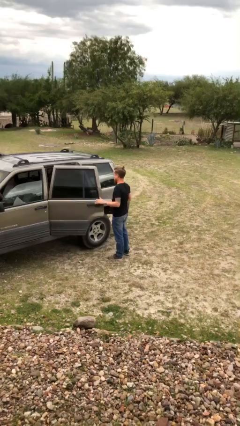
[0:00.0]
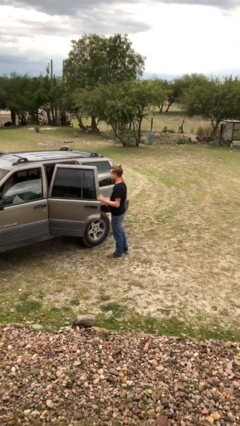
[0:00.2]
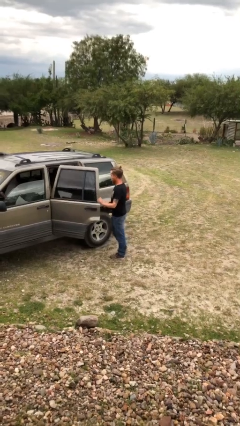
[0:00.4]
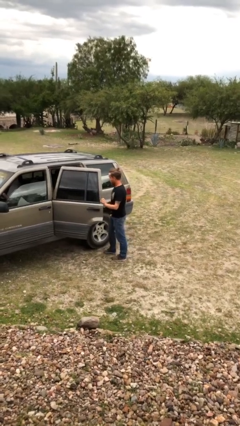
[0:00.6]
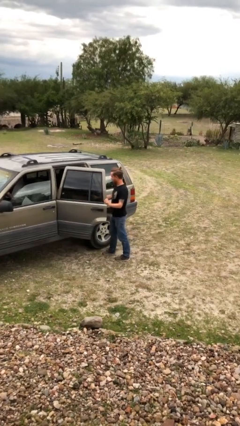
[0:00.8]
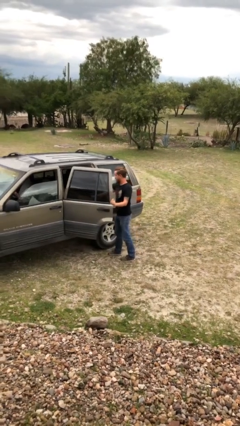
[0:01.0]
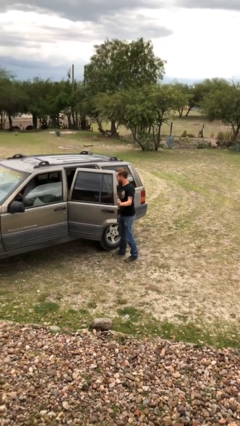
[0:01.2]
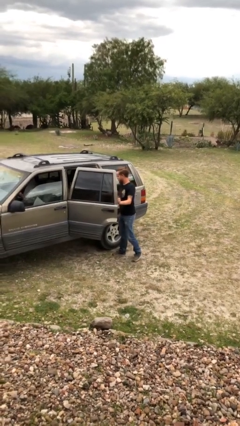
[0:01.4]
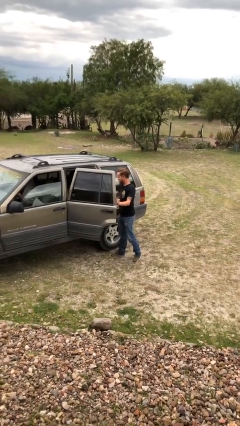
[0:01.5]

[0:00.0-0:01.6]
person unloads car

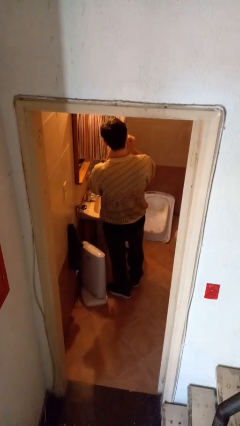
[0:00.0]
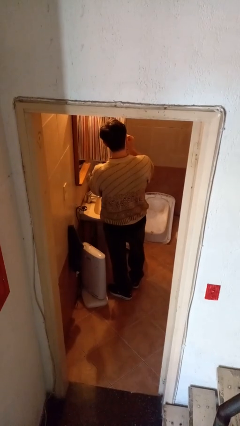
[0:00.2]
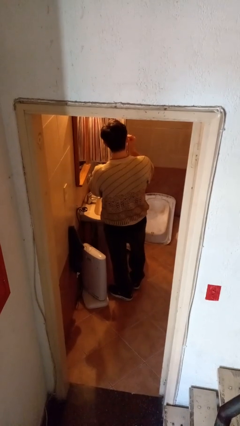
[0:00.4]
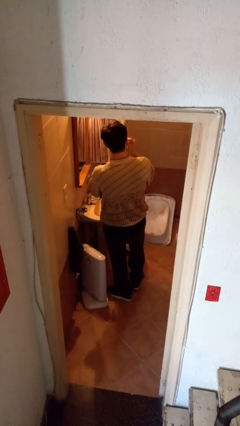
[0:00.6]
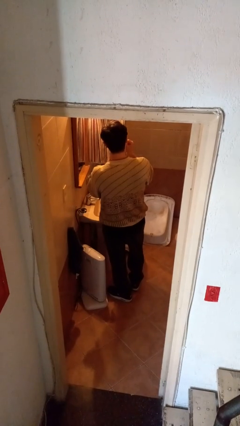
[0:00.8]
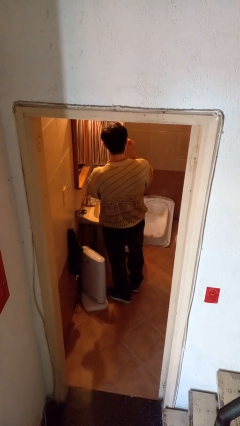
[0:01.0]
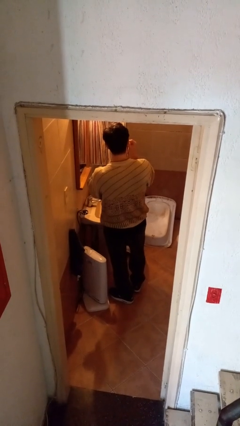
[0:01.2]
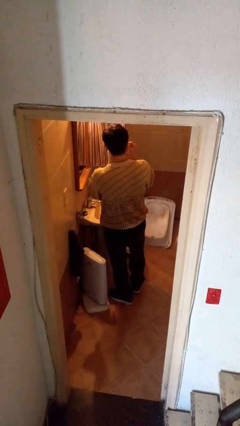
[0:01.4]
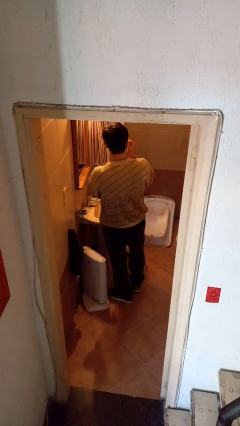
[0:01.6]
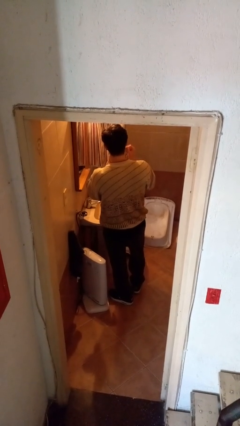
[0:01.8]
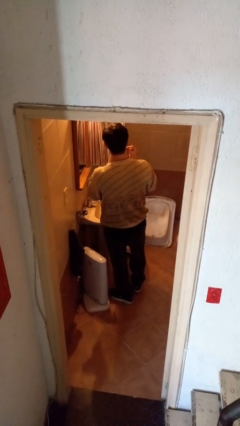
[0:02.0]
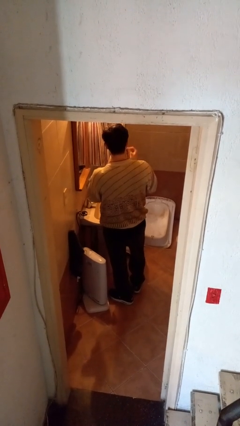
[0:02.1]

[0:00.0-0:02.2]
person flosses

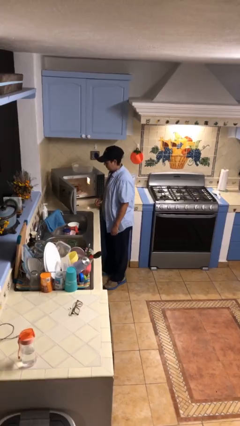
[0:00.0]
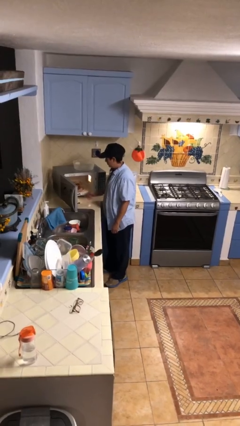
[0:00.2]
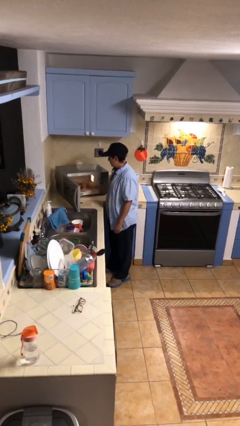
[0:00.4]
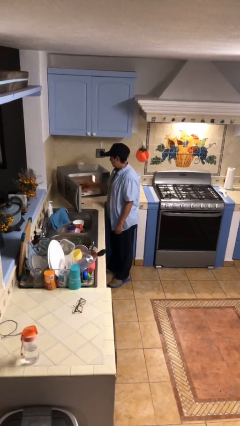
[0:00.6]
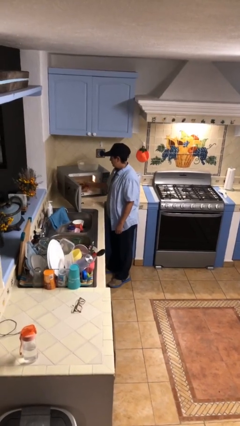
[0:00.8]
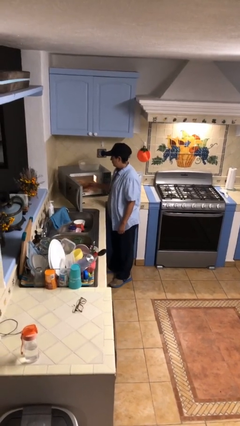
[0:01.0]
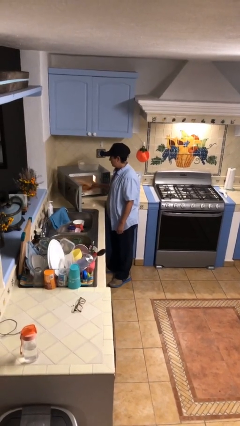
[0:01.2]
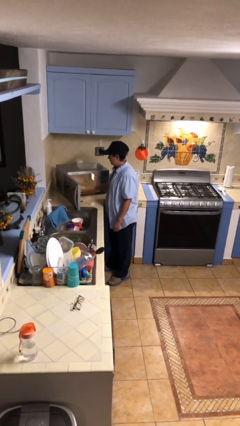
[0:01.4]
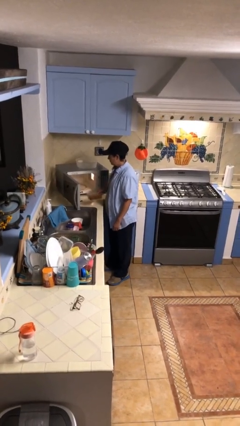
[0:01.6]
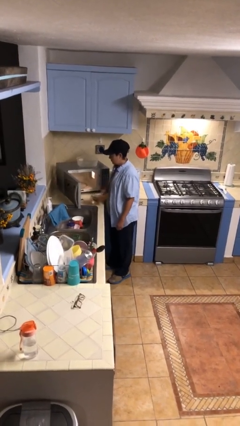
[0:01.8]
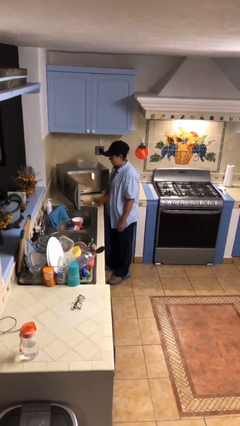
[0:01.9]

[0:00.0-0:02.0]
person takes object from microwave

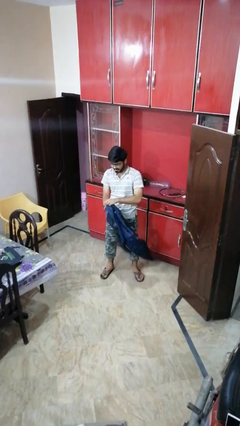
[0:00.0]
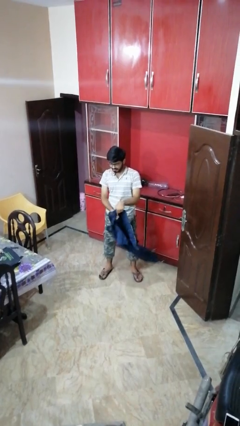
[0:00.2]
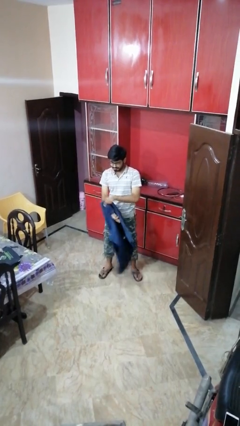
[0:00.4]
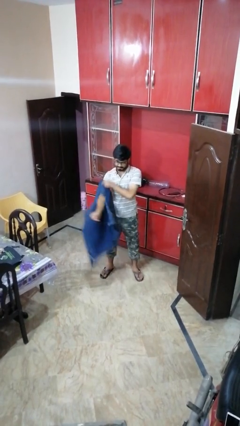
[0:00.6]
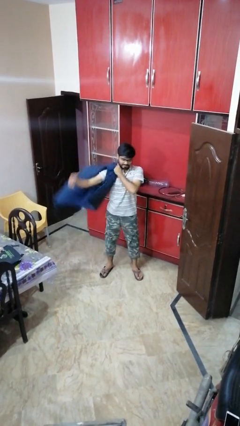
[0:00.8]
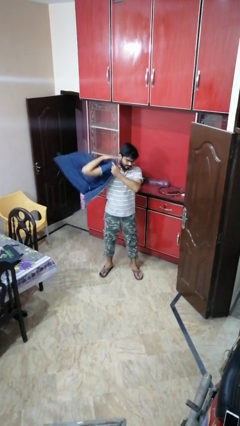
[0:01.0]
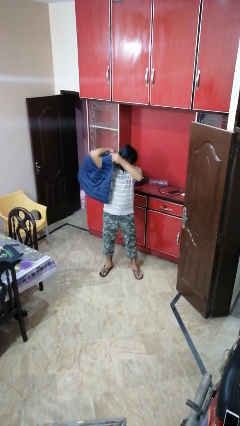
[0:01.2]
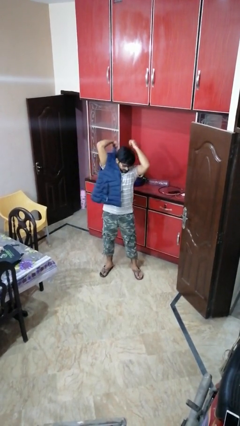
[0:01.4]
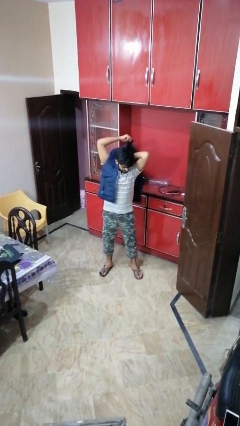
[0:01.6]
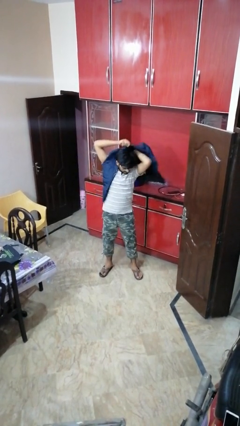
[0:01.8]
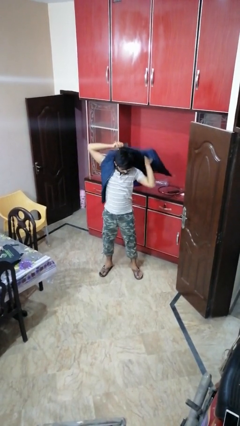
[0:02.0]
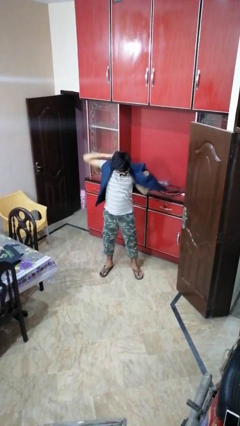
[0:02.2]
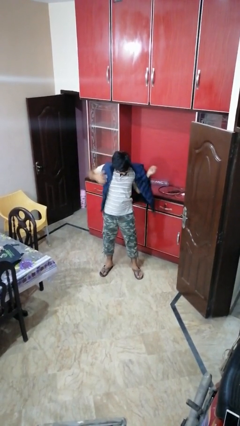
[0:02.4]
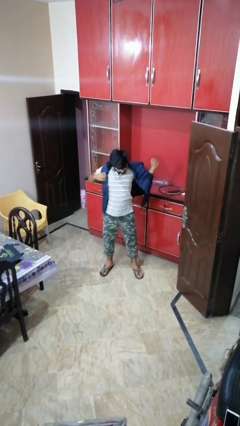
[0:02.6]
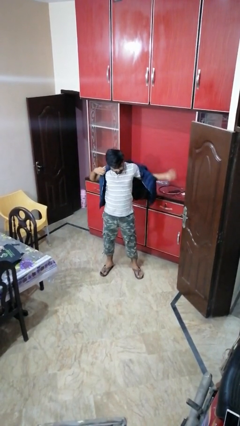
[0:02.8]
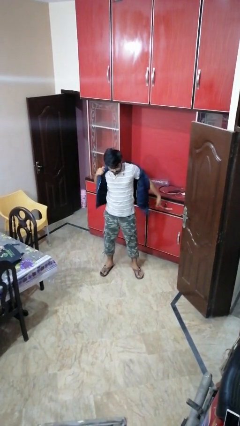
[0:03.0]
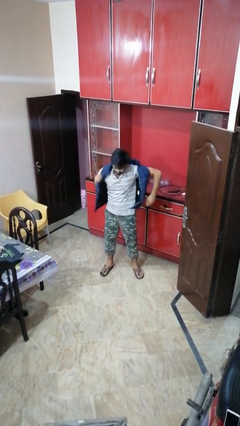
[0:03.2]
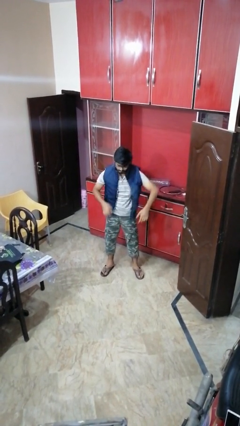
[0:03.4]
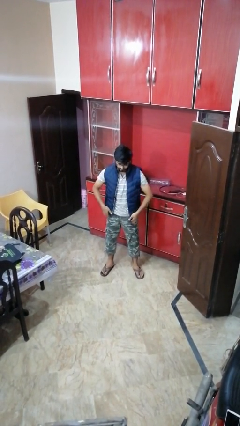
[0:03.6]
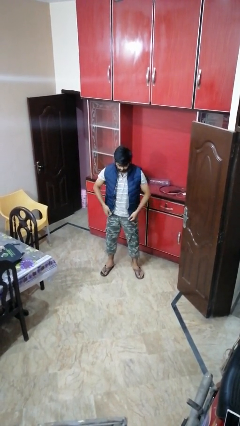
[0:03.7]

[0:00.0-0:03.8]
person puts on jacket

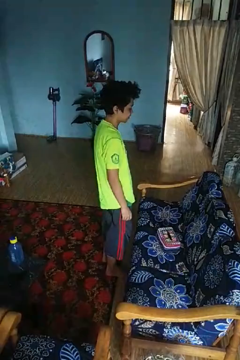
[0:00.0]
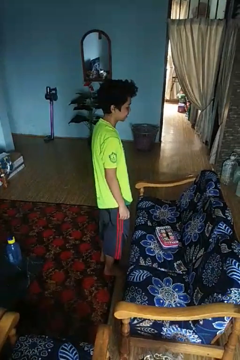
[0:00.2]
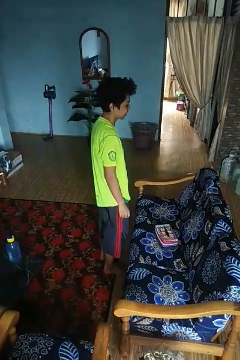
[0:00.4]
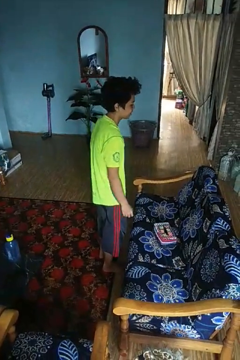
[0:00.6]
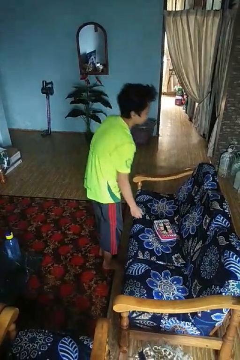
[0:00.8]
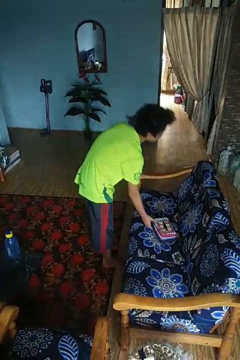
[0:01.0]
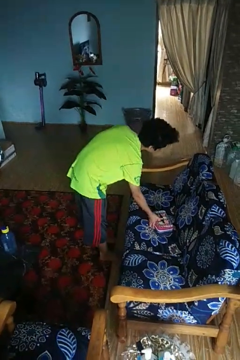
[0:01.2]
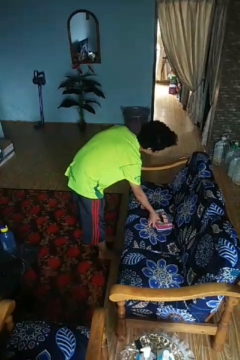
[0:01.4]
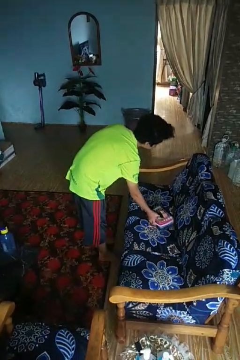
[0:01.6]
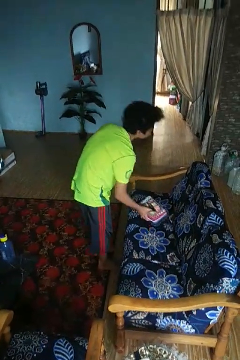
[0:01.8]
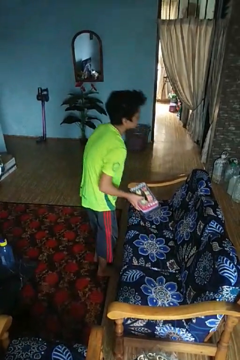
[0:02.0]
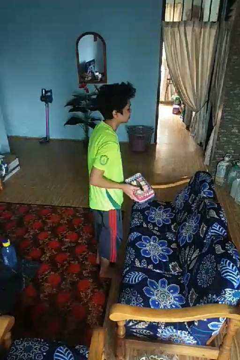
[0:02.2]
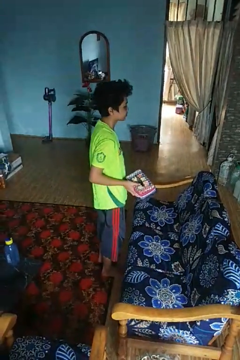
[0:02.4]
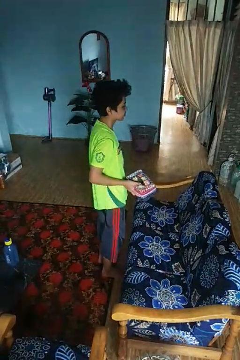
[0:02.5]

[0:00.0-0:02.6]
person picks up object from couch

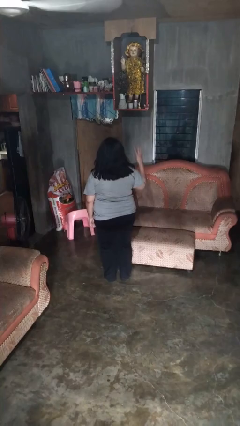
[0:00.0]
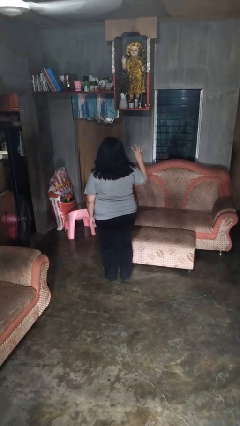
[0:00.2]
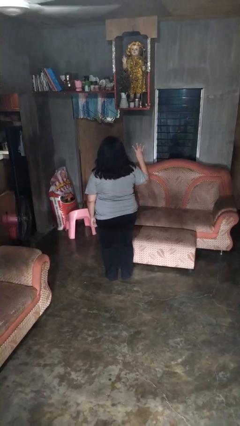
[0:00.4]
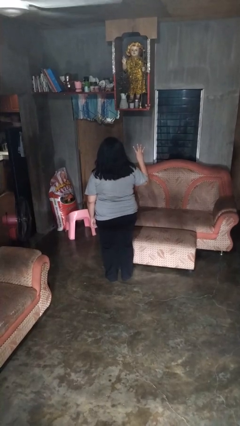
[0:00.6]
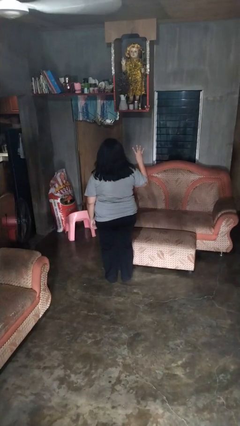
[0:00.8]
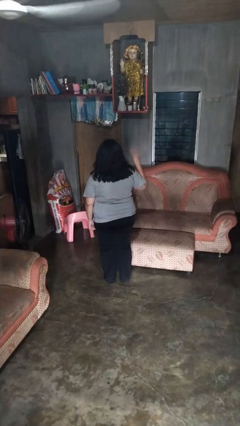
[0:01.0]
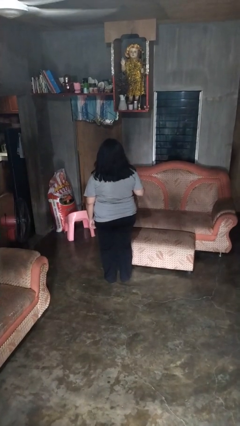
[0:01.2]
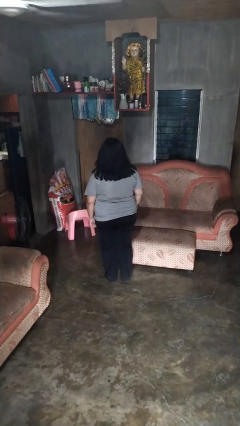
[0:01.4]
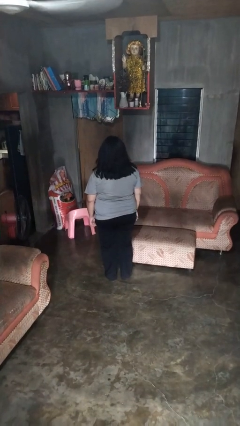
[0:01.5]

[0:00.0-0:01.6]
person gestures number four

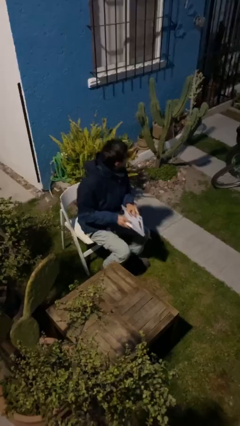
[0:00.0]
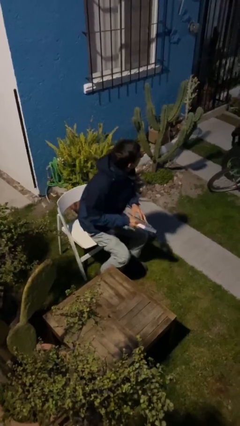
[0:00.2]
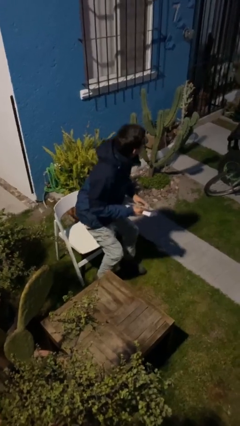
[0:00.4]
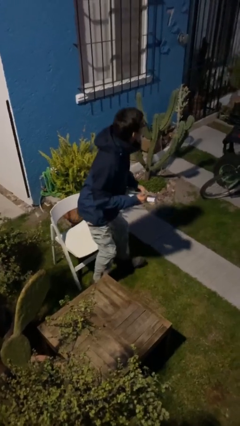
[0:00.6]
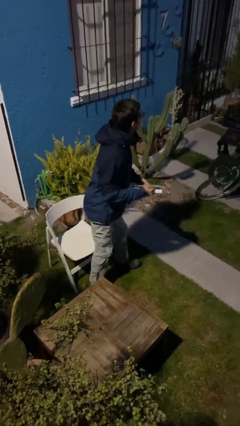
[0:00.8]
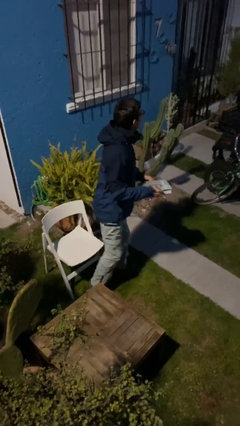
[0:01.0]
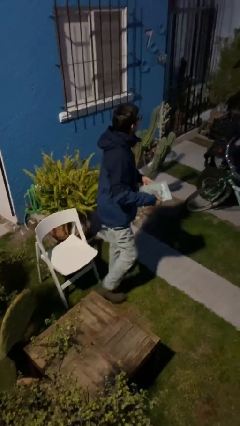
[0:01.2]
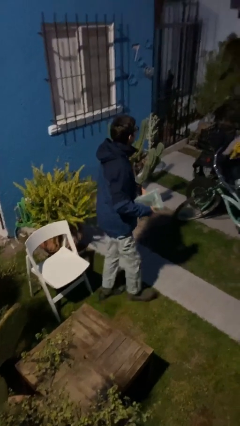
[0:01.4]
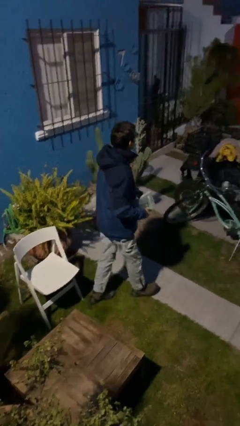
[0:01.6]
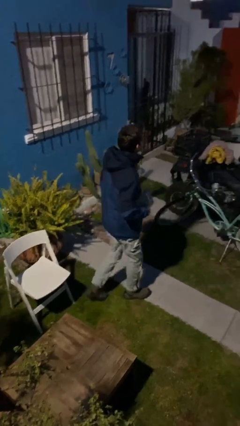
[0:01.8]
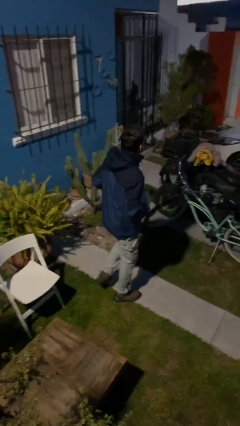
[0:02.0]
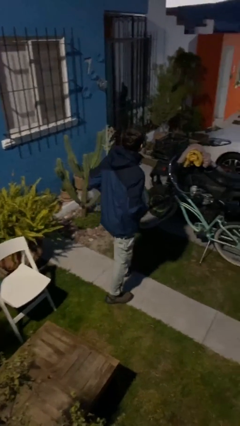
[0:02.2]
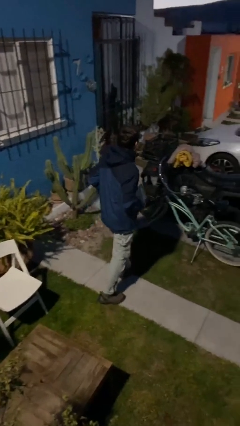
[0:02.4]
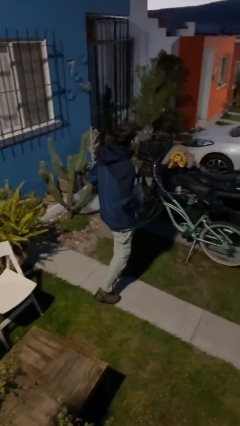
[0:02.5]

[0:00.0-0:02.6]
person stands up

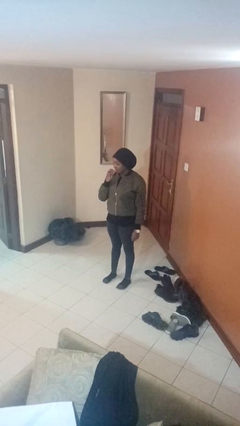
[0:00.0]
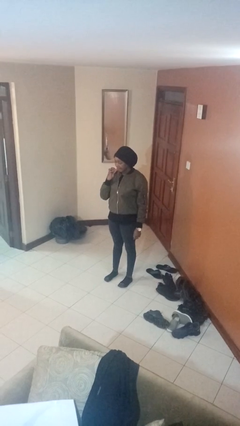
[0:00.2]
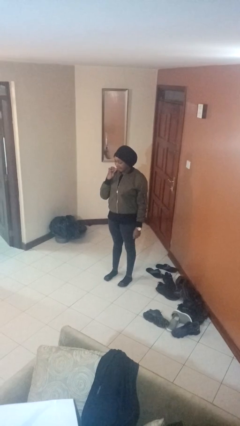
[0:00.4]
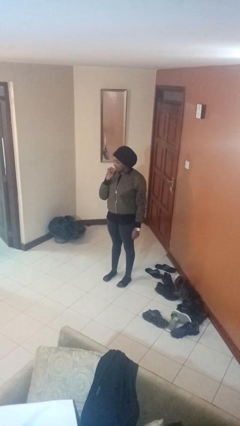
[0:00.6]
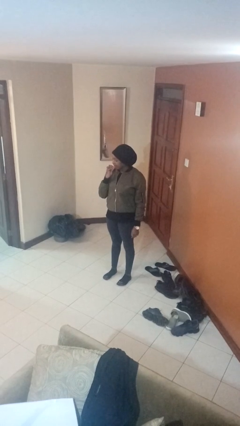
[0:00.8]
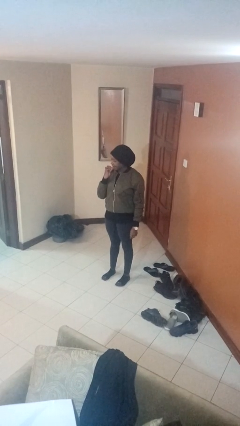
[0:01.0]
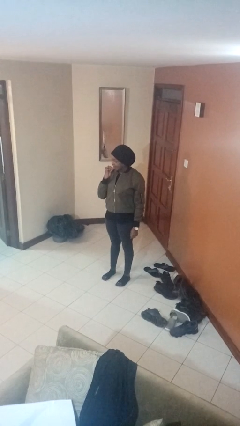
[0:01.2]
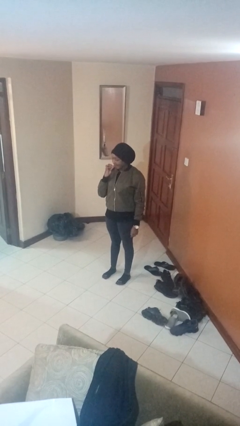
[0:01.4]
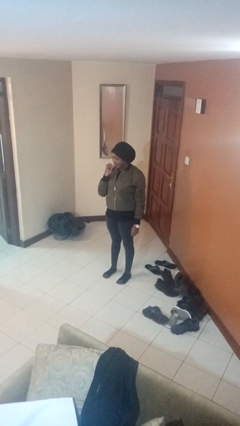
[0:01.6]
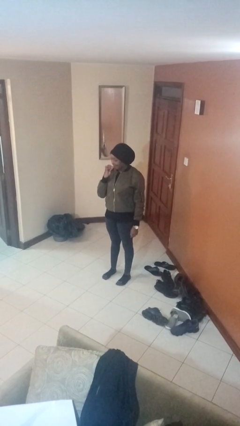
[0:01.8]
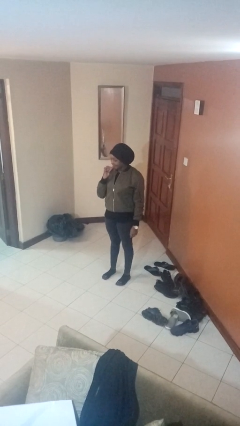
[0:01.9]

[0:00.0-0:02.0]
person applies lip makeup
